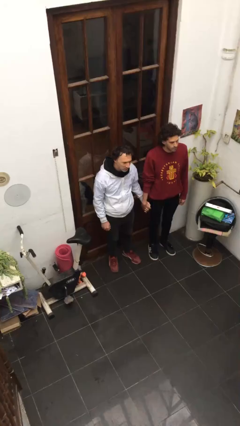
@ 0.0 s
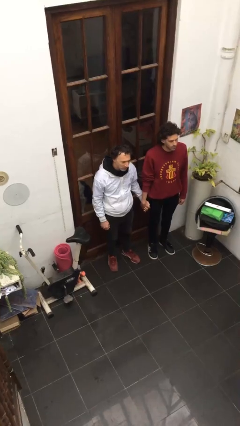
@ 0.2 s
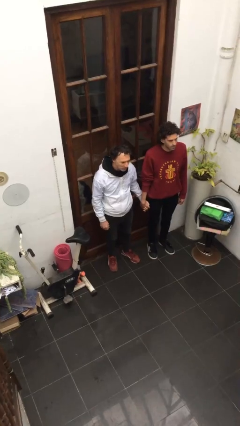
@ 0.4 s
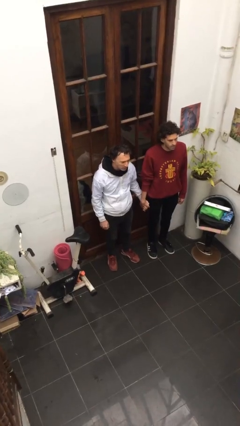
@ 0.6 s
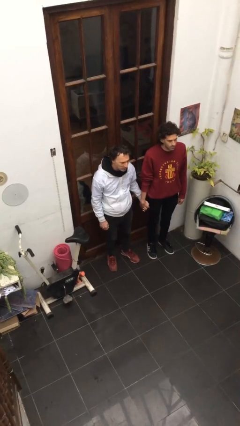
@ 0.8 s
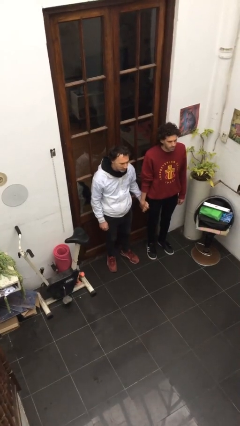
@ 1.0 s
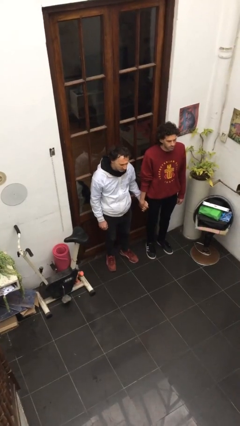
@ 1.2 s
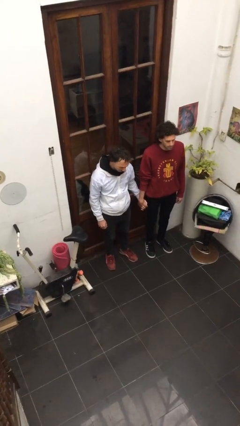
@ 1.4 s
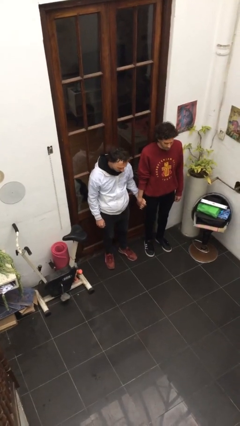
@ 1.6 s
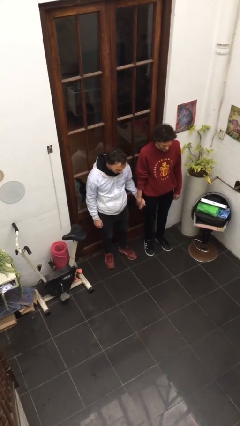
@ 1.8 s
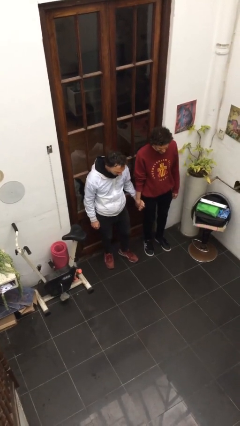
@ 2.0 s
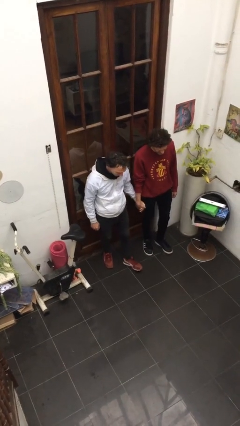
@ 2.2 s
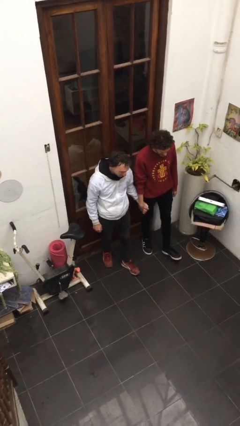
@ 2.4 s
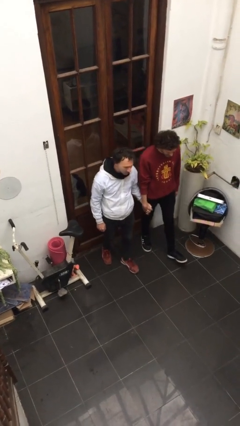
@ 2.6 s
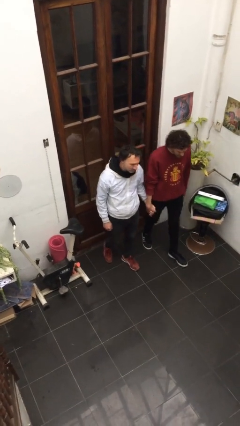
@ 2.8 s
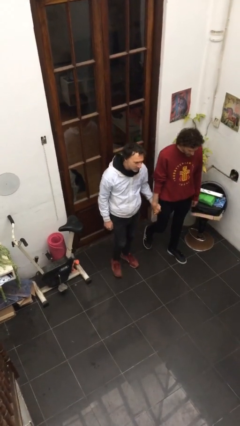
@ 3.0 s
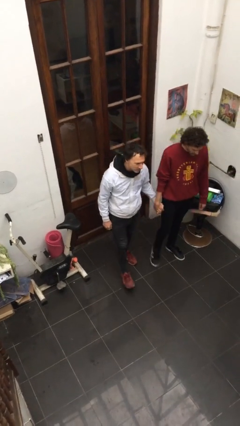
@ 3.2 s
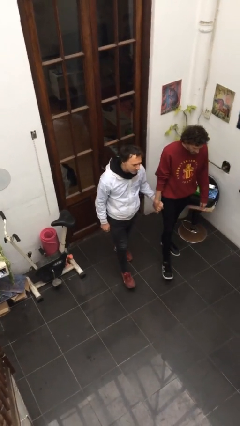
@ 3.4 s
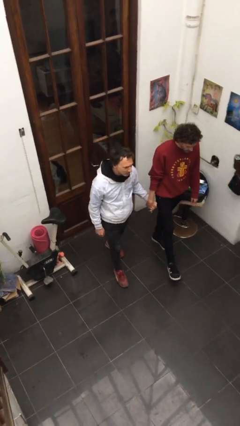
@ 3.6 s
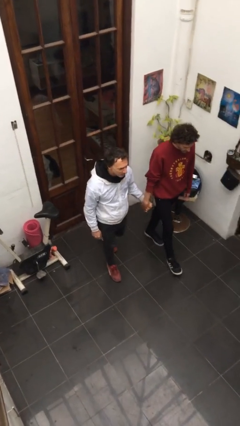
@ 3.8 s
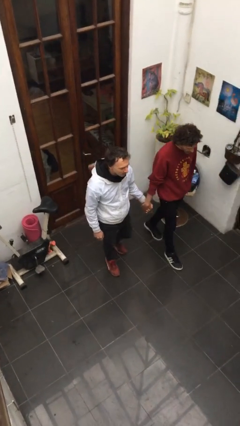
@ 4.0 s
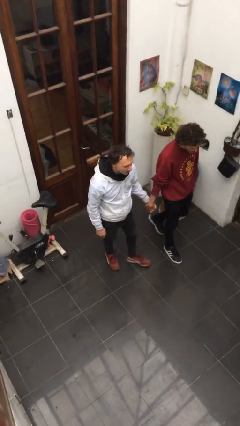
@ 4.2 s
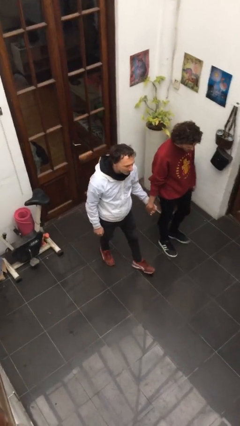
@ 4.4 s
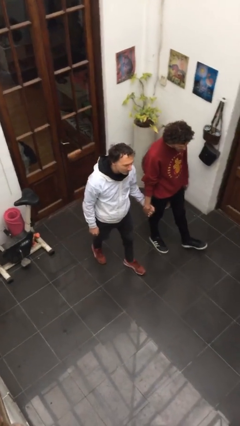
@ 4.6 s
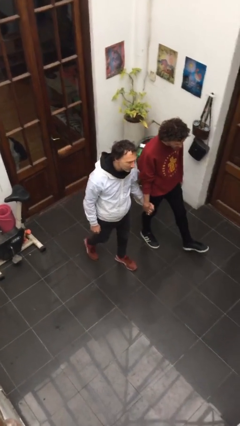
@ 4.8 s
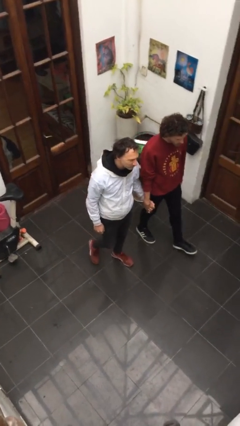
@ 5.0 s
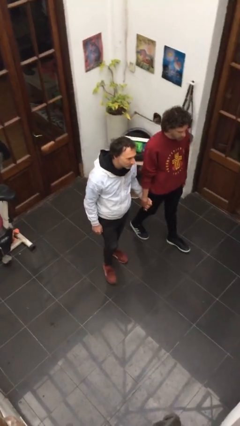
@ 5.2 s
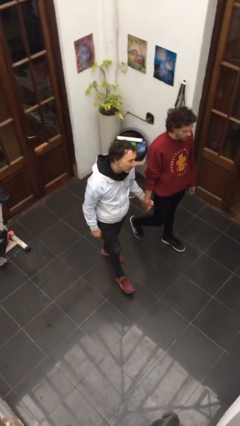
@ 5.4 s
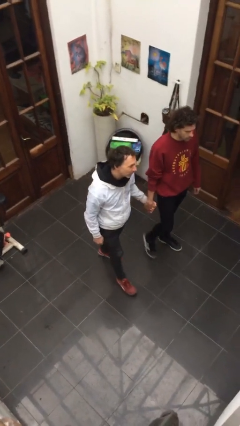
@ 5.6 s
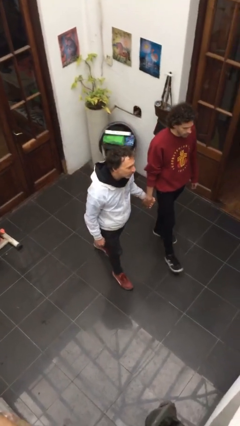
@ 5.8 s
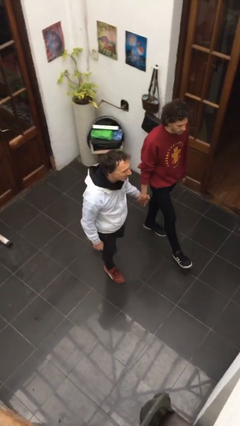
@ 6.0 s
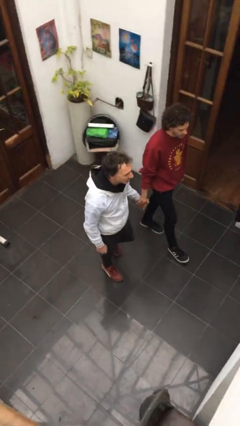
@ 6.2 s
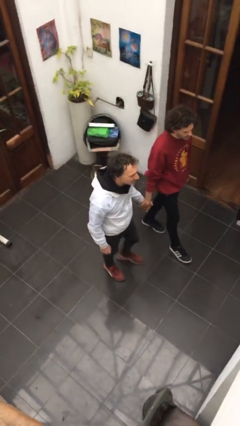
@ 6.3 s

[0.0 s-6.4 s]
person holds hand

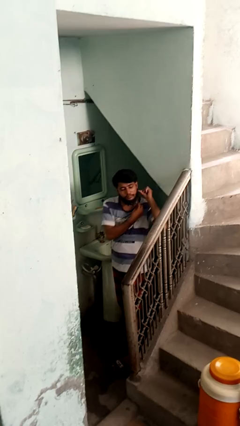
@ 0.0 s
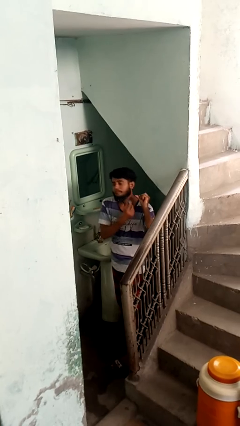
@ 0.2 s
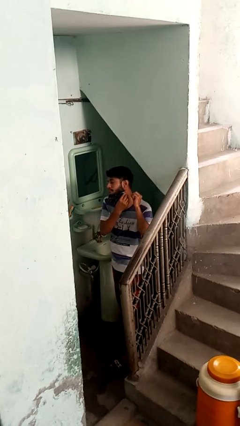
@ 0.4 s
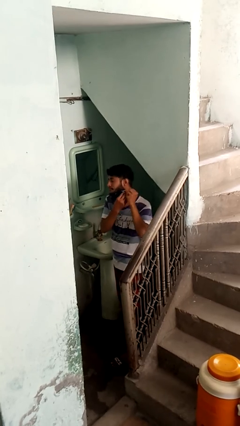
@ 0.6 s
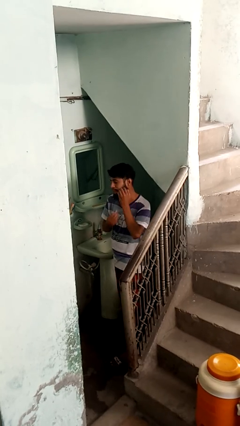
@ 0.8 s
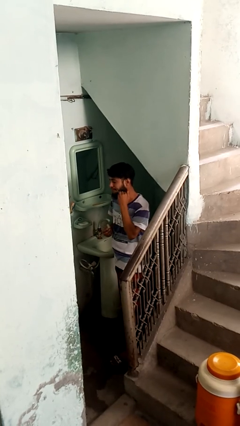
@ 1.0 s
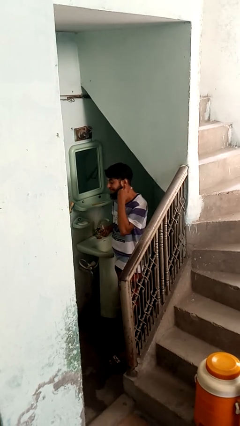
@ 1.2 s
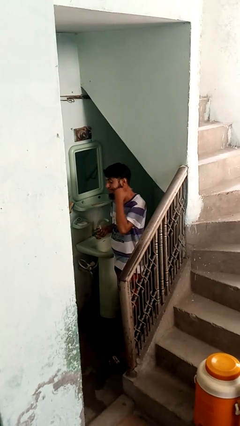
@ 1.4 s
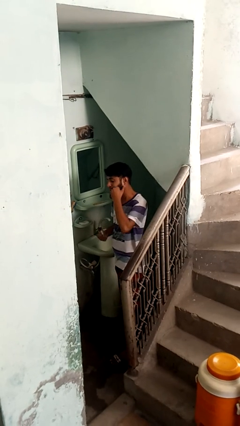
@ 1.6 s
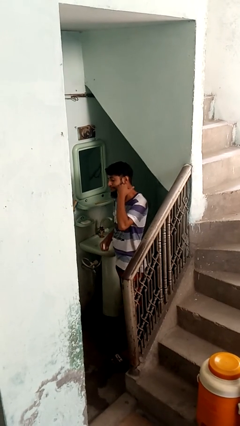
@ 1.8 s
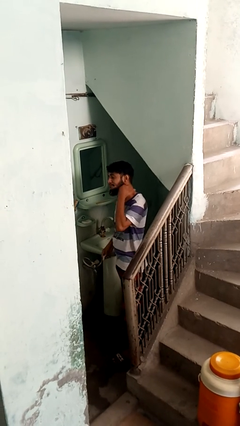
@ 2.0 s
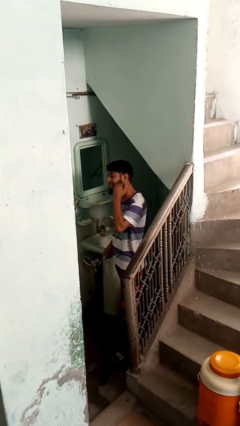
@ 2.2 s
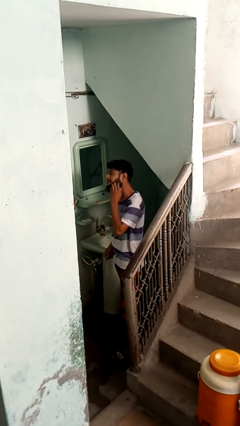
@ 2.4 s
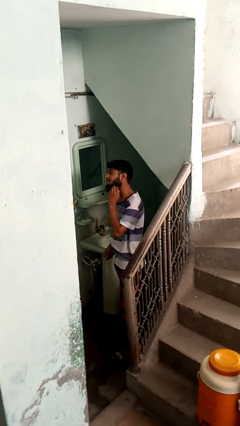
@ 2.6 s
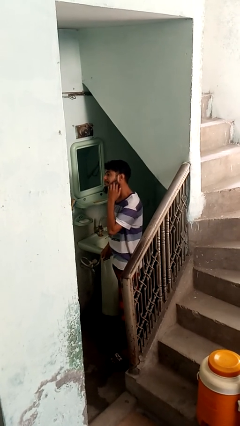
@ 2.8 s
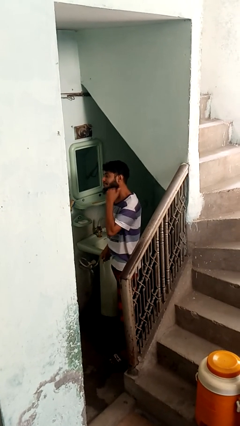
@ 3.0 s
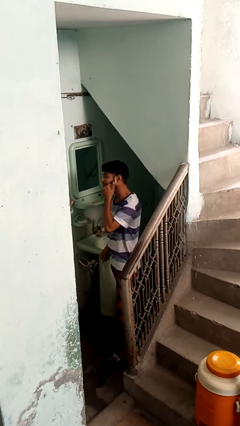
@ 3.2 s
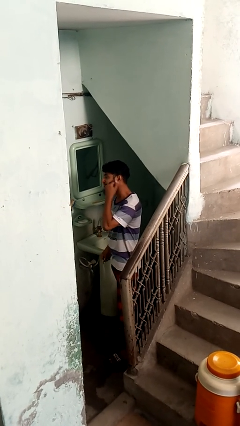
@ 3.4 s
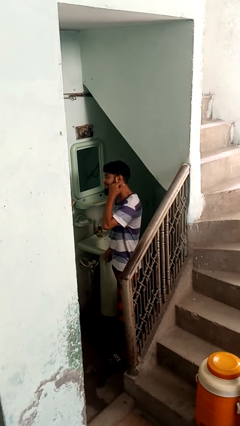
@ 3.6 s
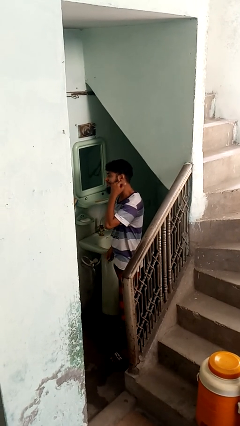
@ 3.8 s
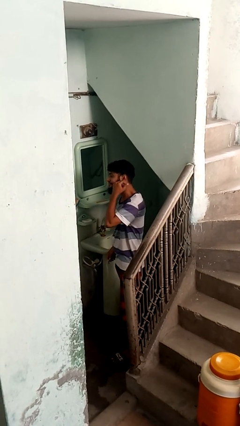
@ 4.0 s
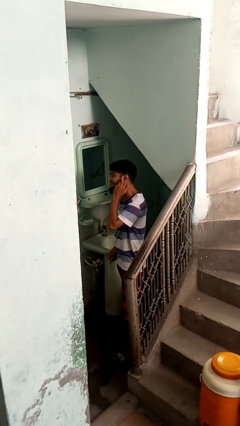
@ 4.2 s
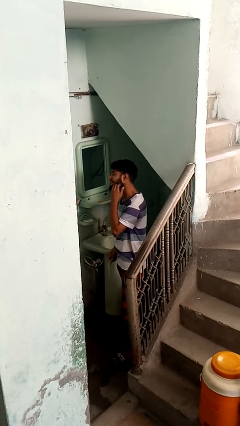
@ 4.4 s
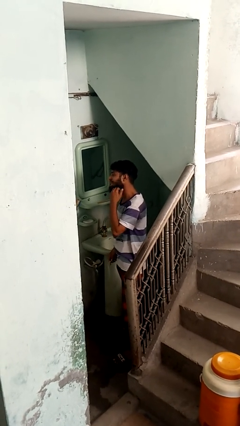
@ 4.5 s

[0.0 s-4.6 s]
person applies shaving cream

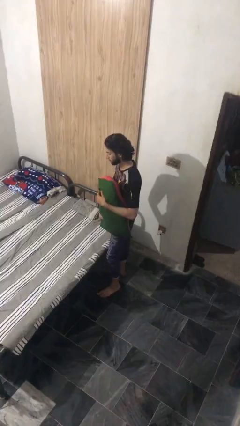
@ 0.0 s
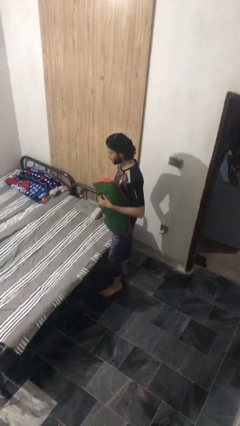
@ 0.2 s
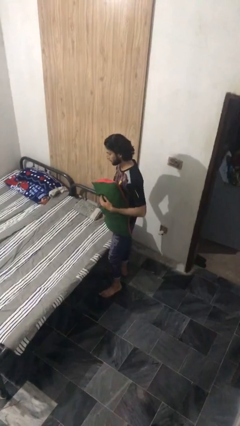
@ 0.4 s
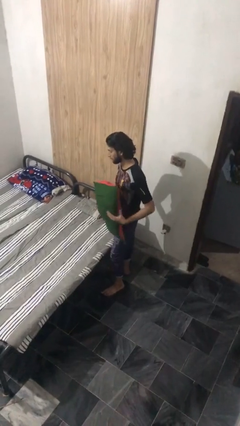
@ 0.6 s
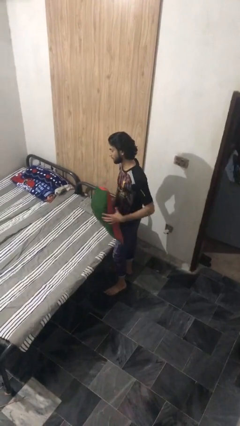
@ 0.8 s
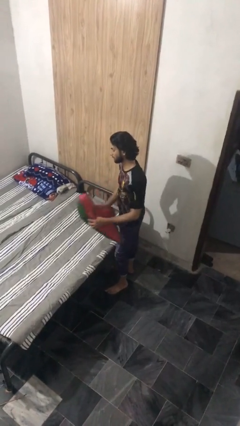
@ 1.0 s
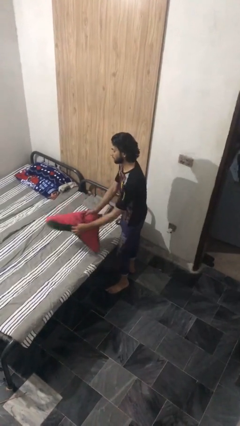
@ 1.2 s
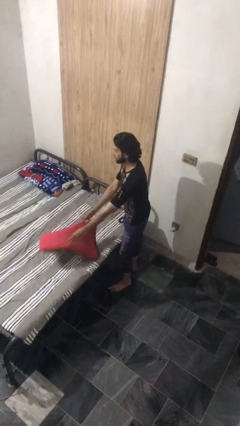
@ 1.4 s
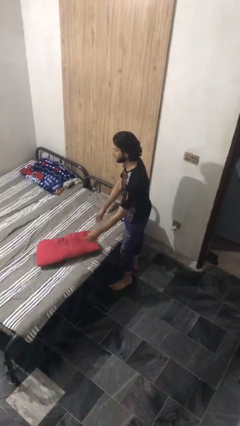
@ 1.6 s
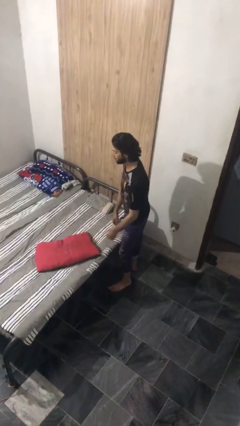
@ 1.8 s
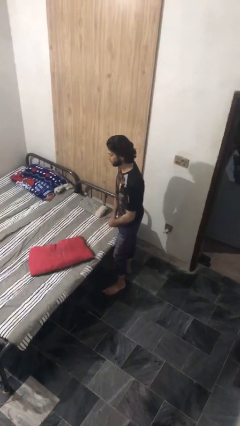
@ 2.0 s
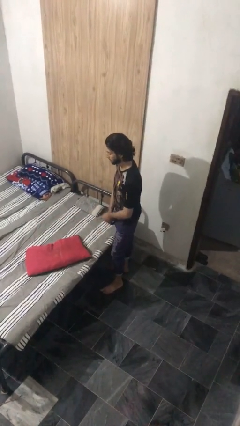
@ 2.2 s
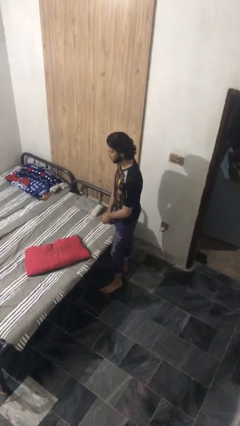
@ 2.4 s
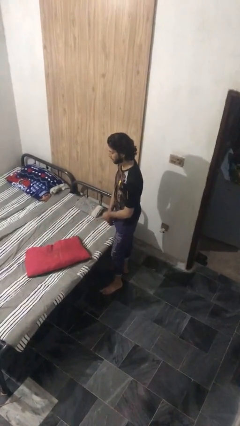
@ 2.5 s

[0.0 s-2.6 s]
person puts down object on bed

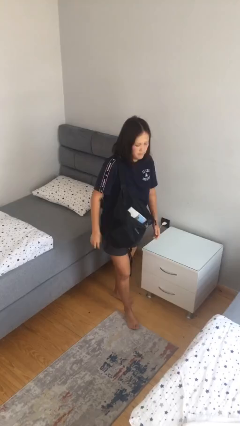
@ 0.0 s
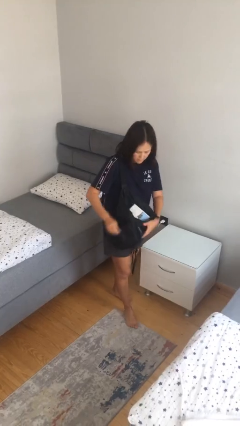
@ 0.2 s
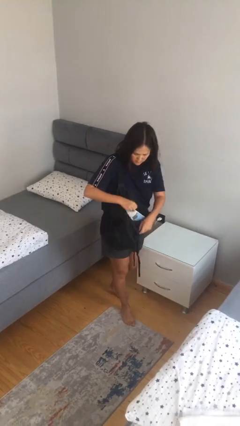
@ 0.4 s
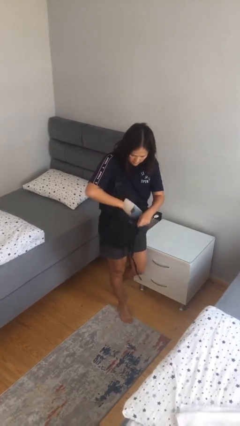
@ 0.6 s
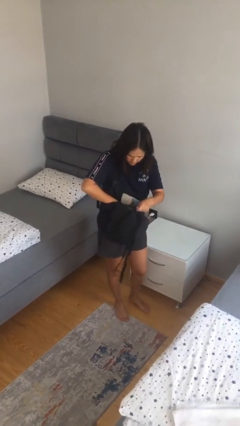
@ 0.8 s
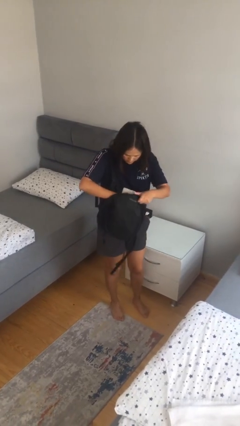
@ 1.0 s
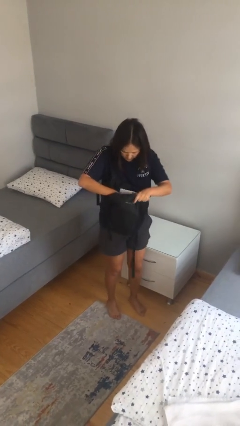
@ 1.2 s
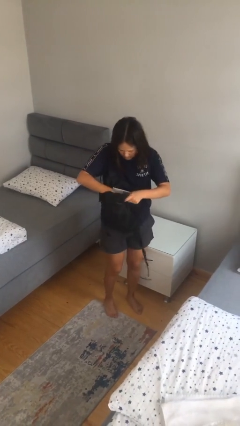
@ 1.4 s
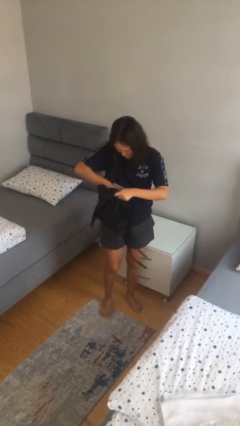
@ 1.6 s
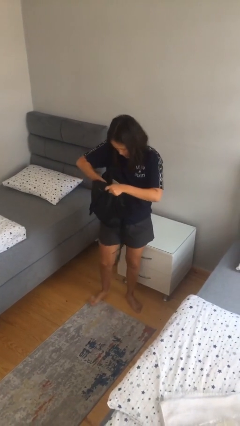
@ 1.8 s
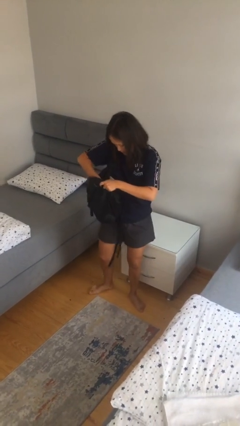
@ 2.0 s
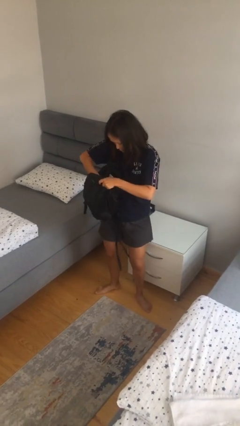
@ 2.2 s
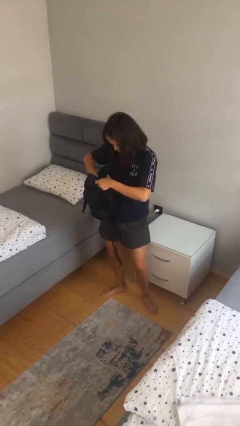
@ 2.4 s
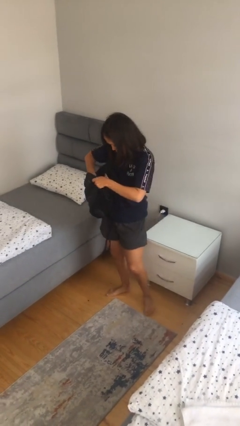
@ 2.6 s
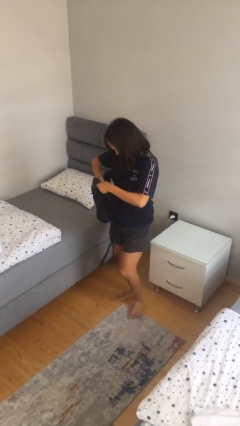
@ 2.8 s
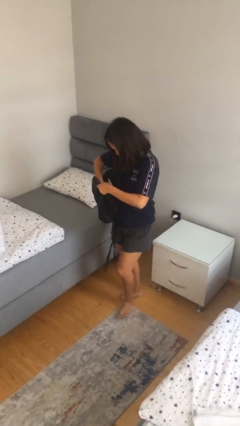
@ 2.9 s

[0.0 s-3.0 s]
person searches in backpack

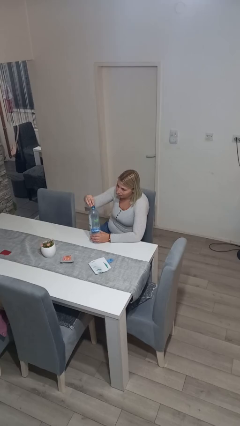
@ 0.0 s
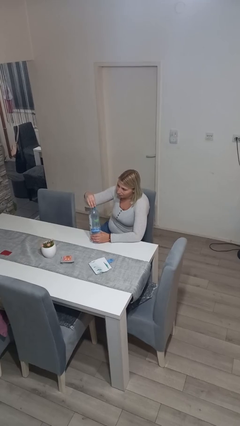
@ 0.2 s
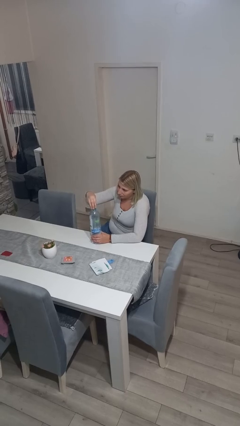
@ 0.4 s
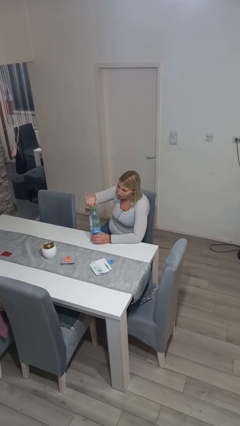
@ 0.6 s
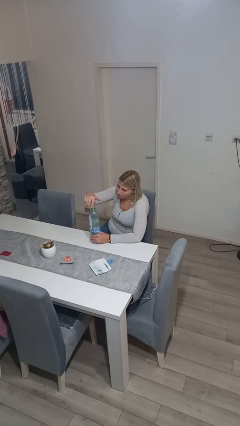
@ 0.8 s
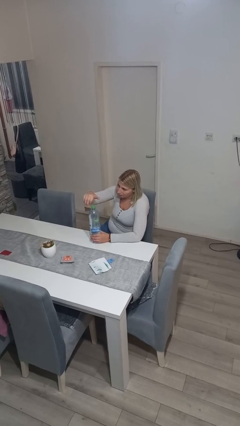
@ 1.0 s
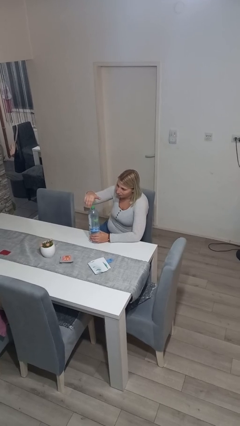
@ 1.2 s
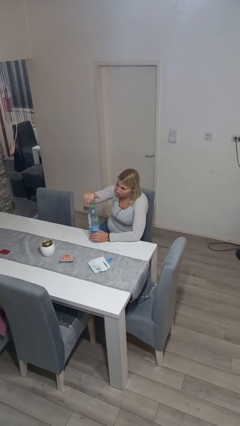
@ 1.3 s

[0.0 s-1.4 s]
person screws lid to bottle
